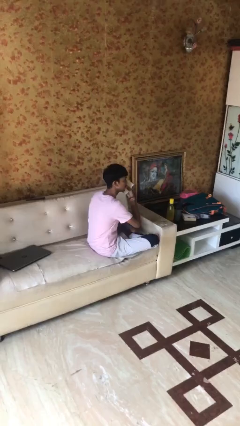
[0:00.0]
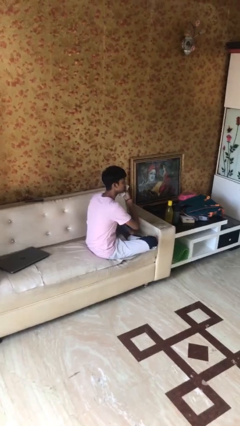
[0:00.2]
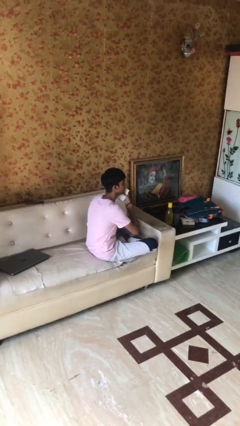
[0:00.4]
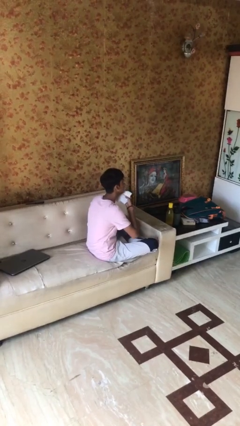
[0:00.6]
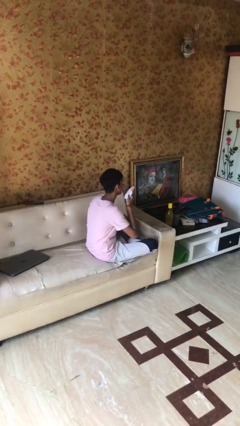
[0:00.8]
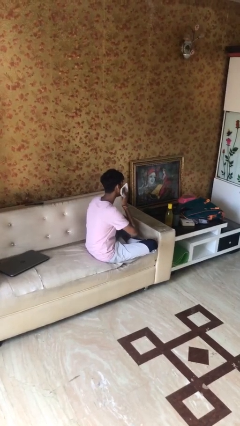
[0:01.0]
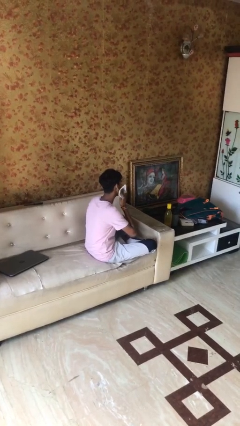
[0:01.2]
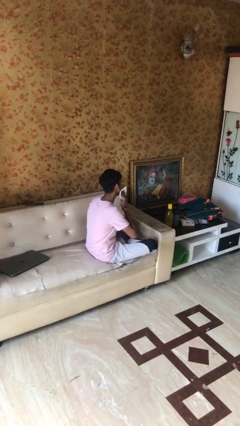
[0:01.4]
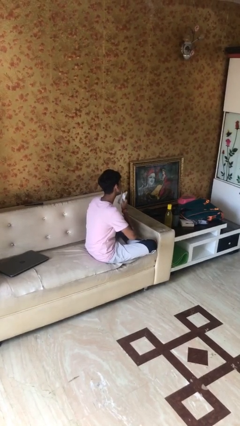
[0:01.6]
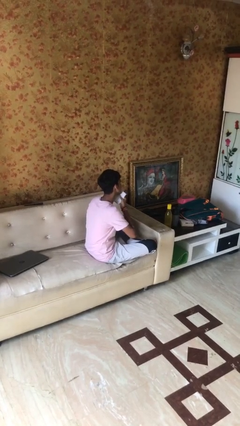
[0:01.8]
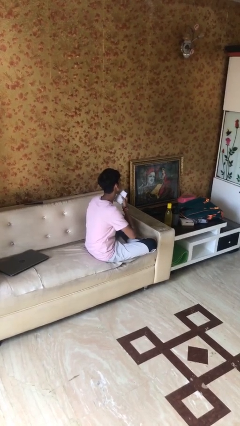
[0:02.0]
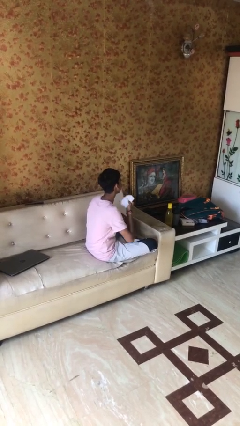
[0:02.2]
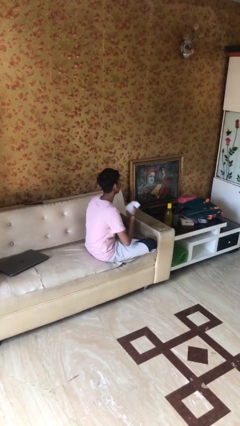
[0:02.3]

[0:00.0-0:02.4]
person wipes mouth with napkin

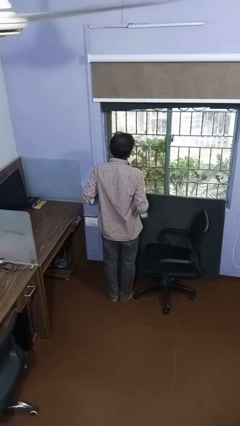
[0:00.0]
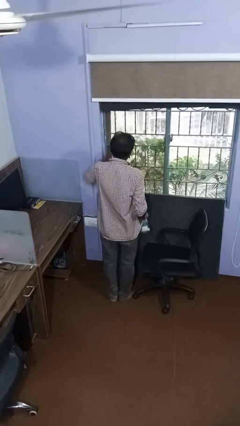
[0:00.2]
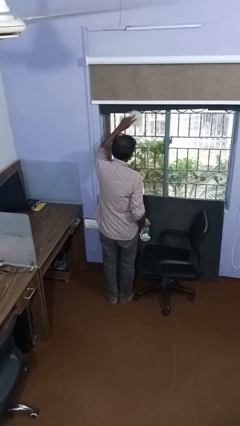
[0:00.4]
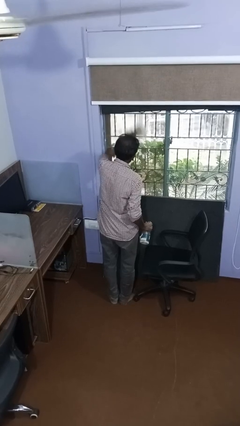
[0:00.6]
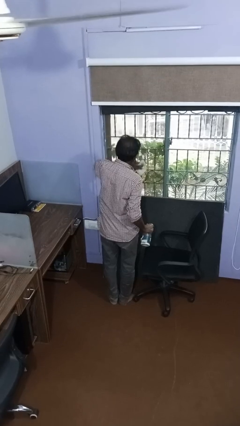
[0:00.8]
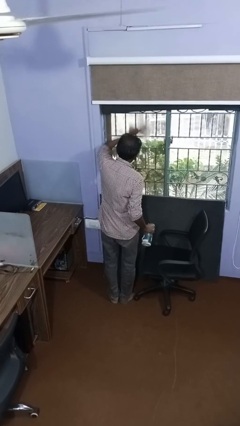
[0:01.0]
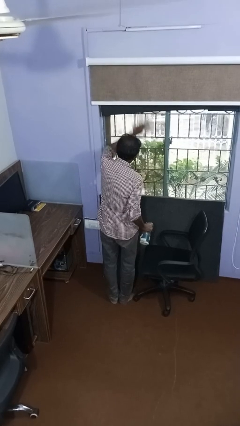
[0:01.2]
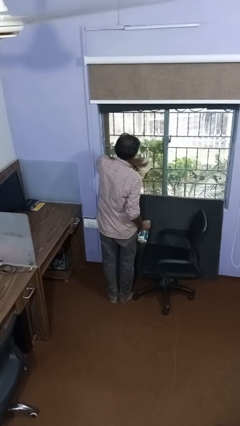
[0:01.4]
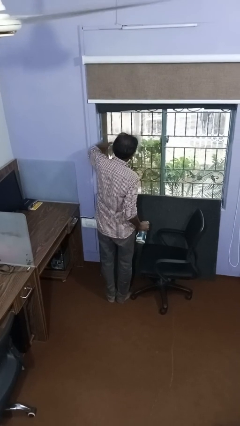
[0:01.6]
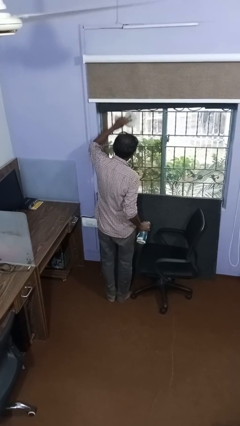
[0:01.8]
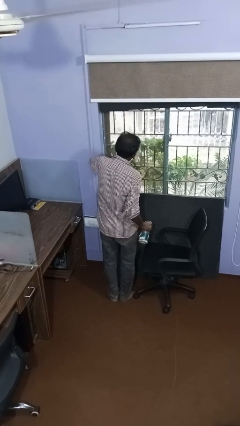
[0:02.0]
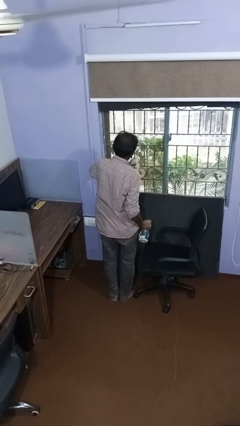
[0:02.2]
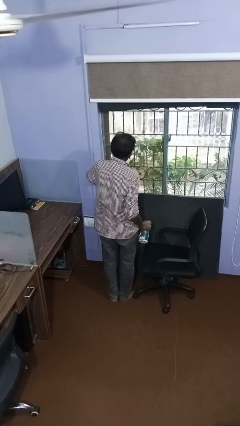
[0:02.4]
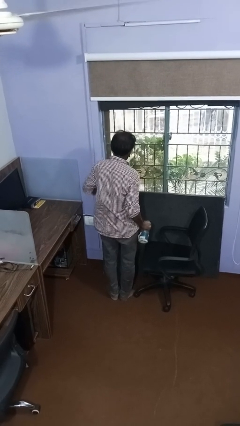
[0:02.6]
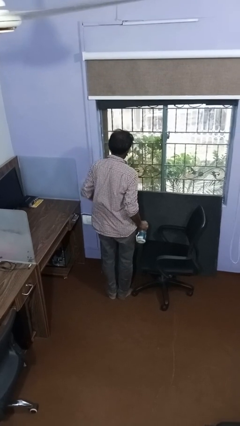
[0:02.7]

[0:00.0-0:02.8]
person washes window

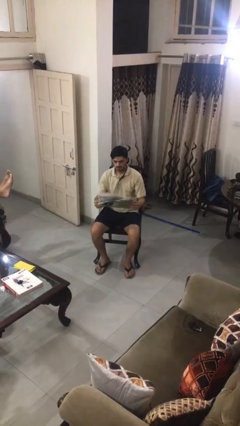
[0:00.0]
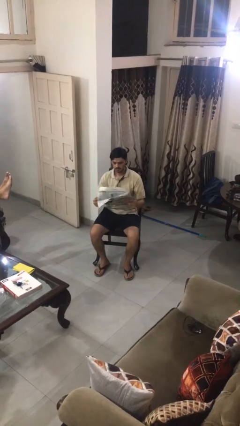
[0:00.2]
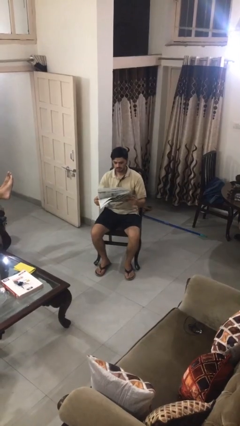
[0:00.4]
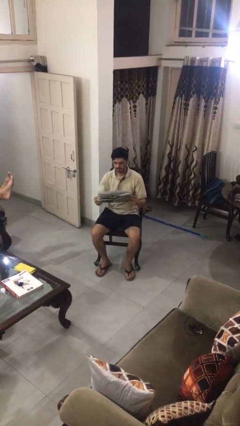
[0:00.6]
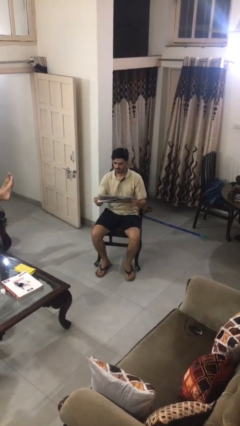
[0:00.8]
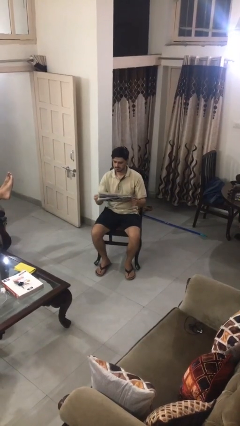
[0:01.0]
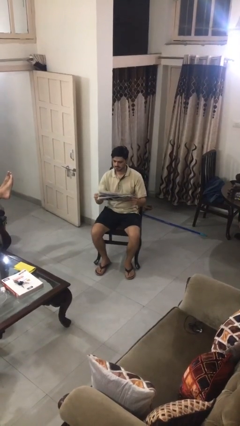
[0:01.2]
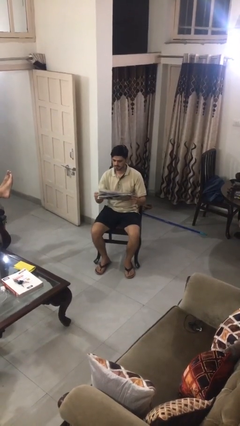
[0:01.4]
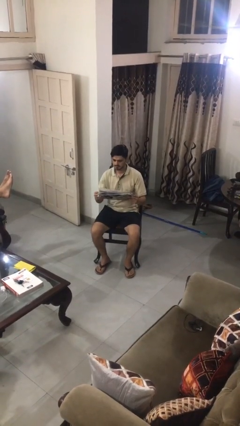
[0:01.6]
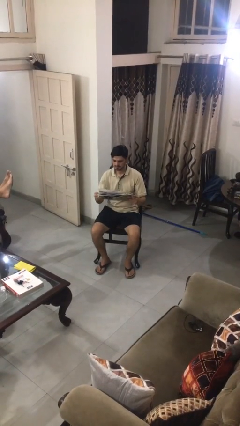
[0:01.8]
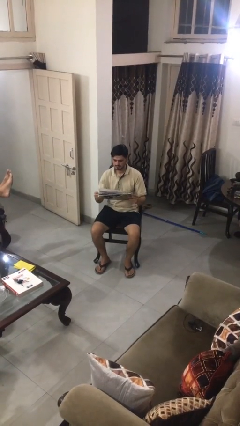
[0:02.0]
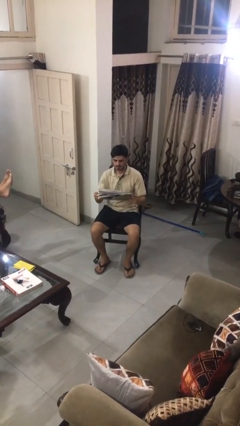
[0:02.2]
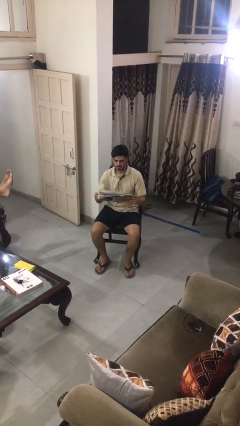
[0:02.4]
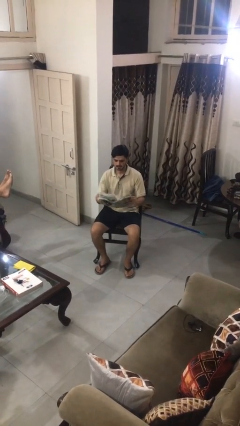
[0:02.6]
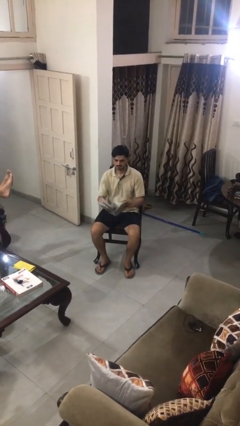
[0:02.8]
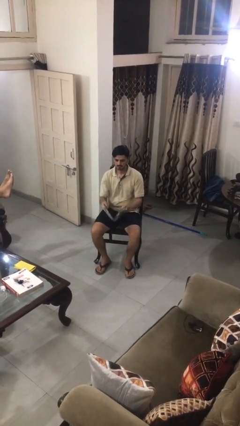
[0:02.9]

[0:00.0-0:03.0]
person reads newspaper

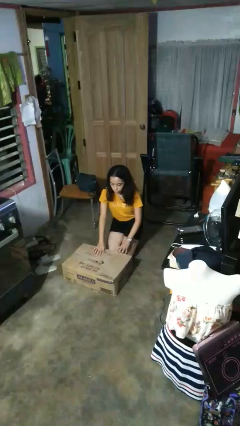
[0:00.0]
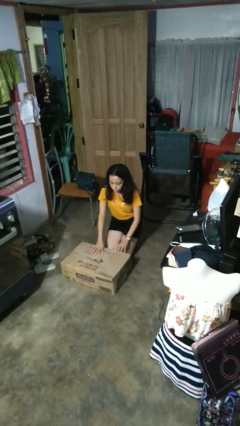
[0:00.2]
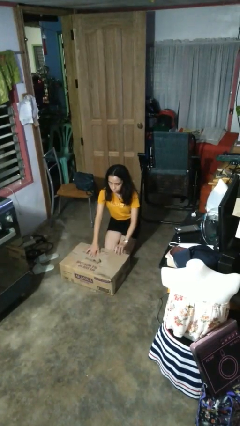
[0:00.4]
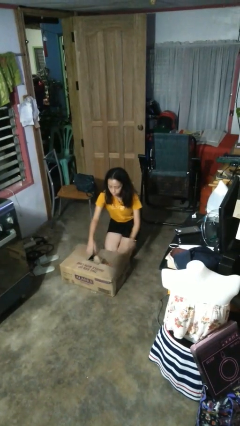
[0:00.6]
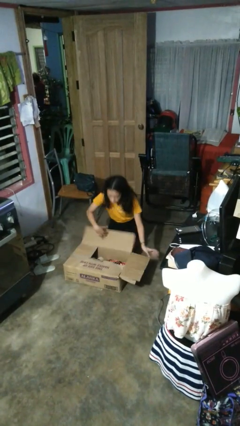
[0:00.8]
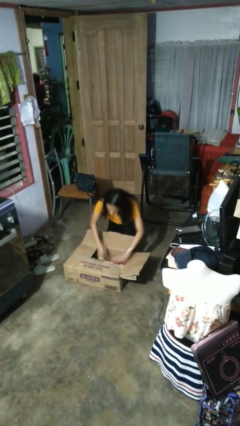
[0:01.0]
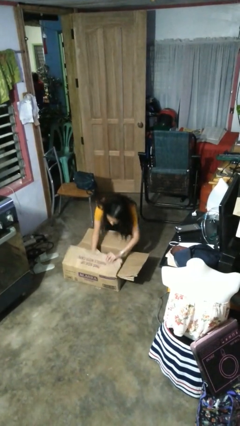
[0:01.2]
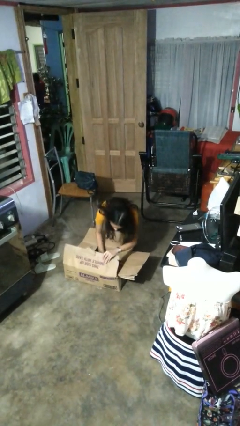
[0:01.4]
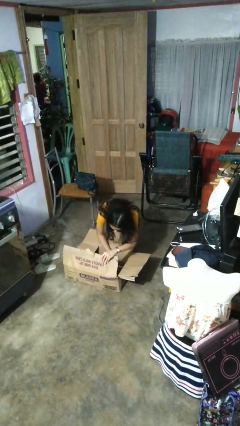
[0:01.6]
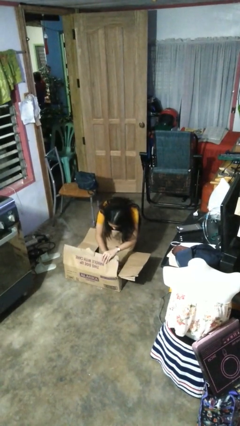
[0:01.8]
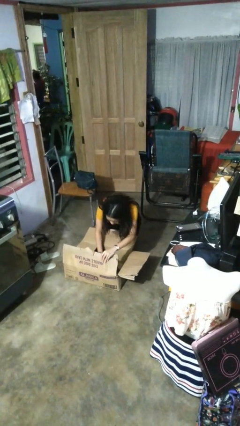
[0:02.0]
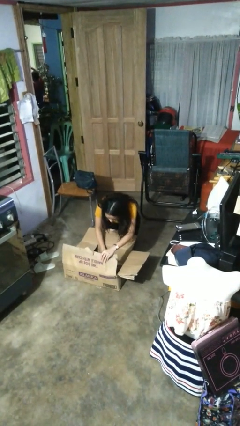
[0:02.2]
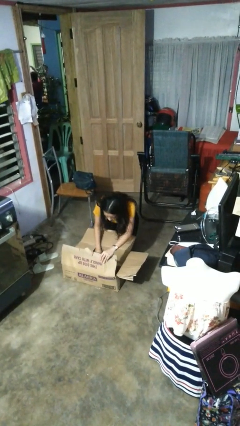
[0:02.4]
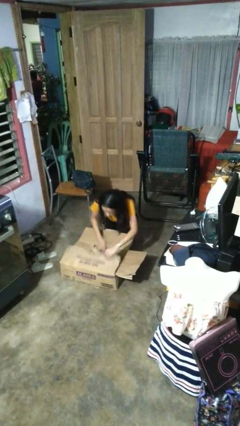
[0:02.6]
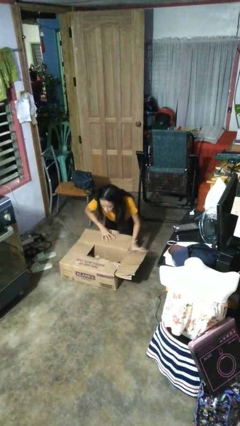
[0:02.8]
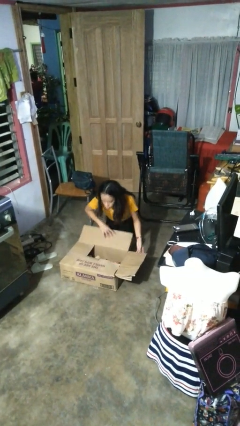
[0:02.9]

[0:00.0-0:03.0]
person searches in box

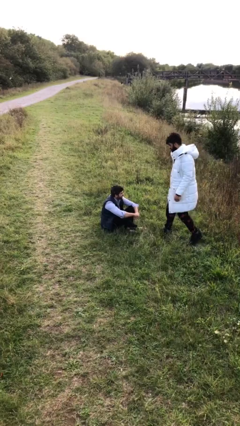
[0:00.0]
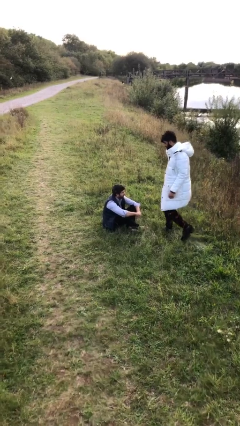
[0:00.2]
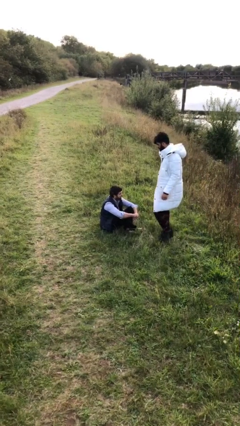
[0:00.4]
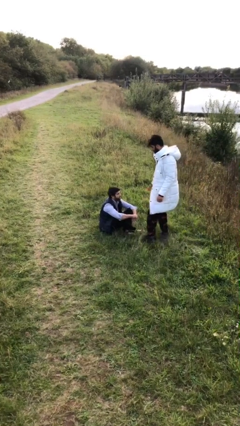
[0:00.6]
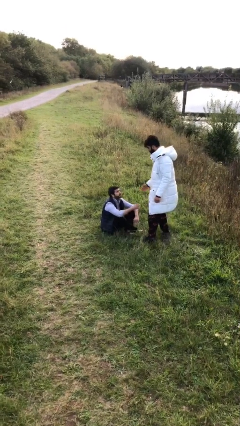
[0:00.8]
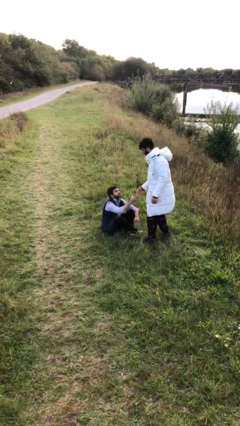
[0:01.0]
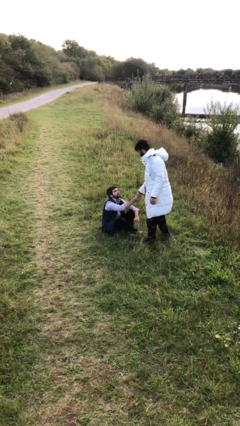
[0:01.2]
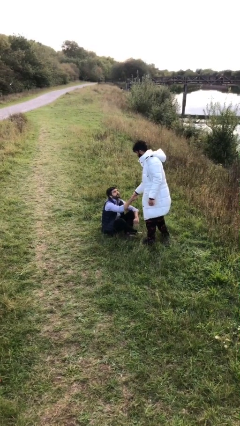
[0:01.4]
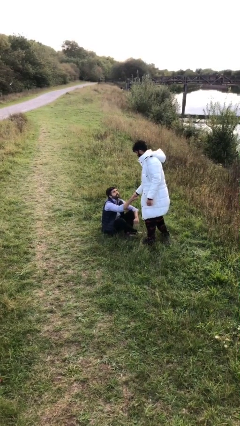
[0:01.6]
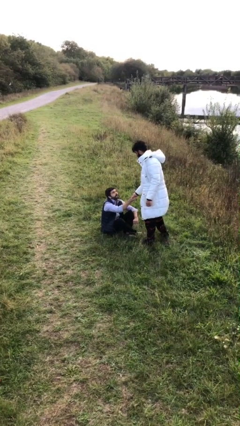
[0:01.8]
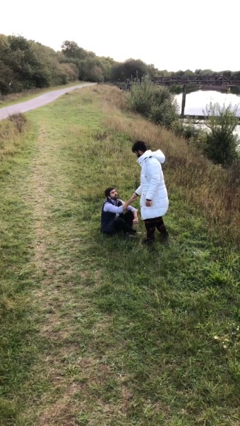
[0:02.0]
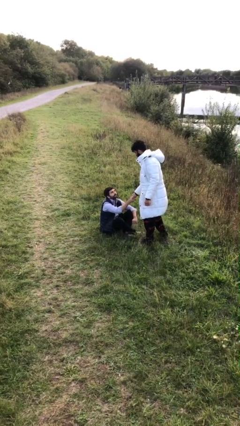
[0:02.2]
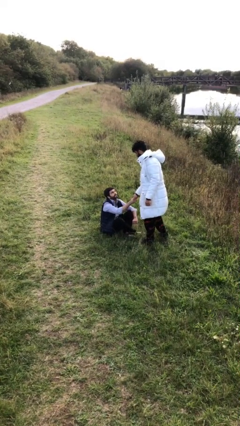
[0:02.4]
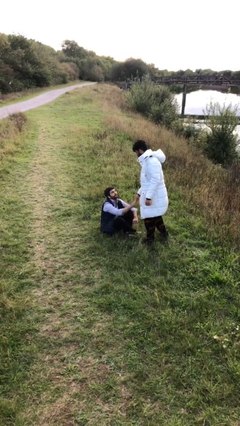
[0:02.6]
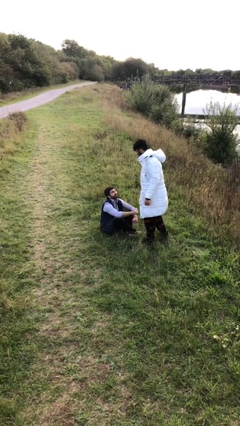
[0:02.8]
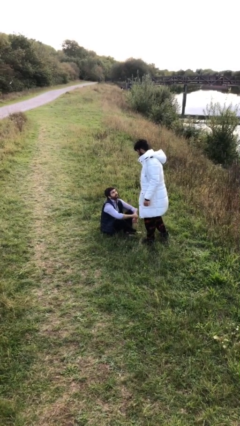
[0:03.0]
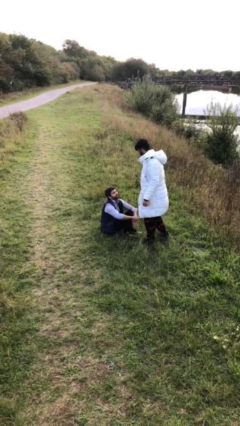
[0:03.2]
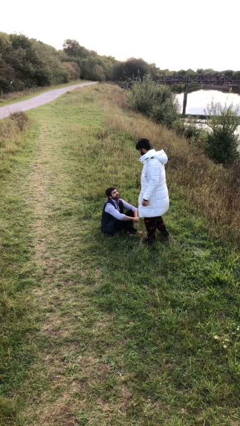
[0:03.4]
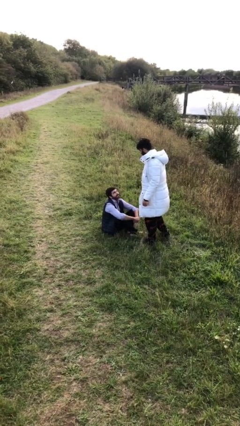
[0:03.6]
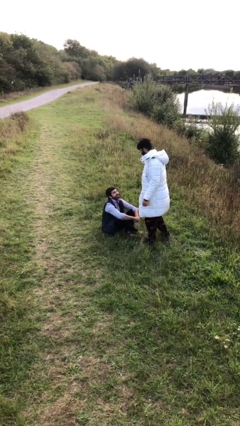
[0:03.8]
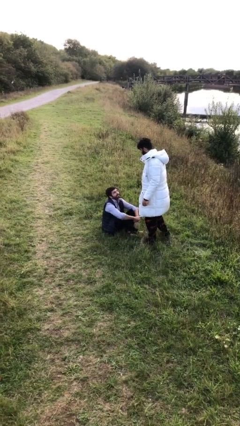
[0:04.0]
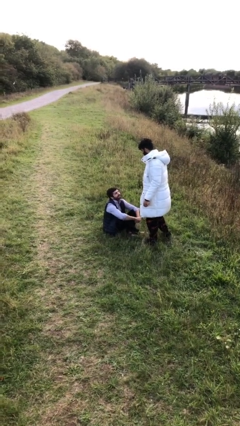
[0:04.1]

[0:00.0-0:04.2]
person shakes hand

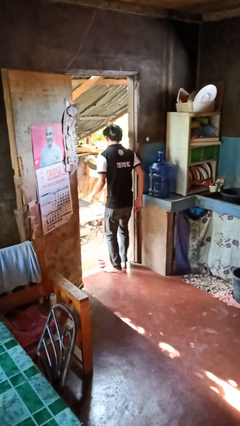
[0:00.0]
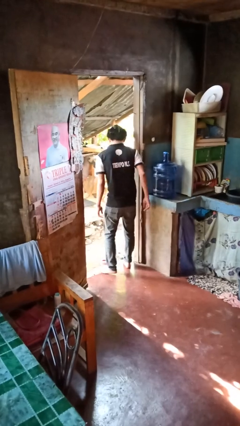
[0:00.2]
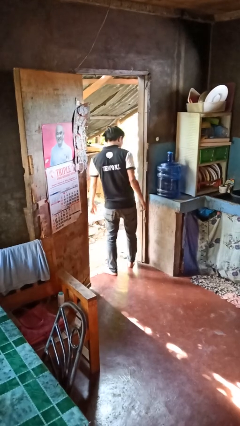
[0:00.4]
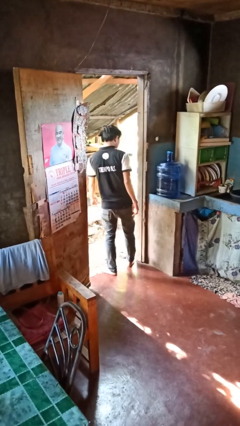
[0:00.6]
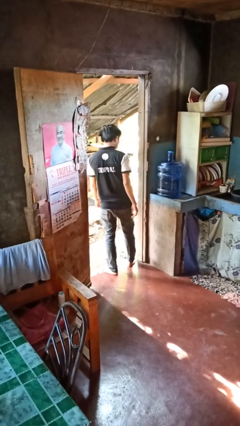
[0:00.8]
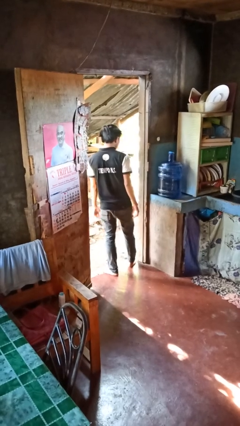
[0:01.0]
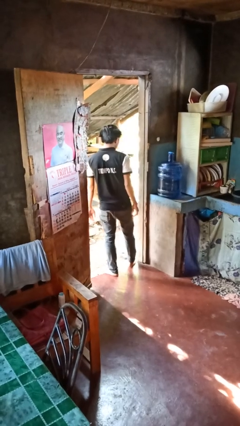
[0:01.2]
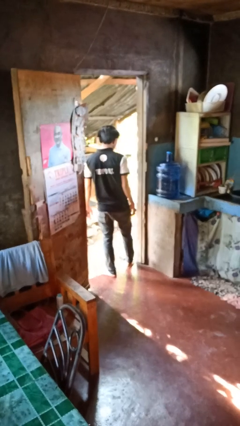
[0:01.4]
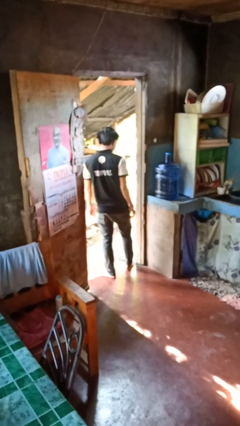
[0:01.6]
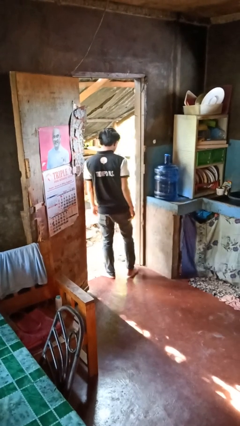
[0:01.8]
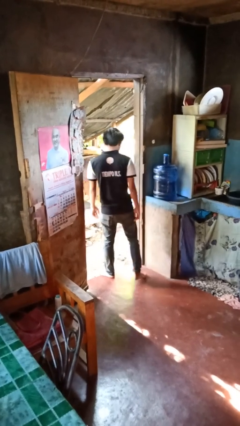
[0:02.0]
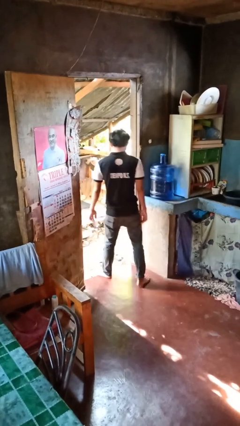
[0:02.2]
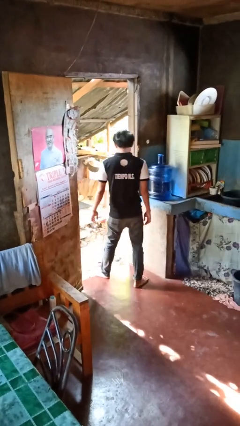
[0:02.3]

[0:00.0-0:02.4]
person bumps into wall
